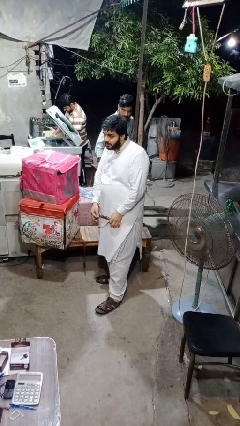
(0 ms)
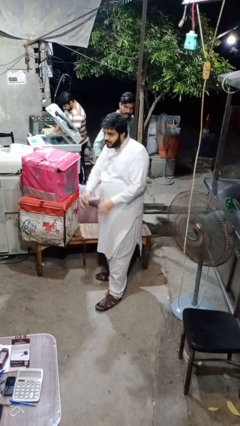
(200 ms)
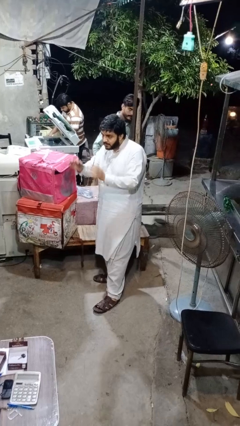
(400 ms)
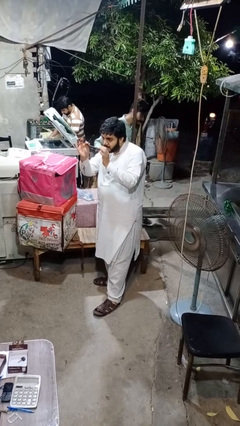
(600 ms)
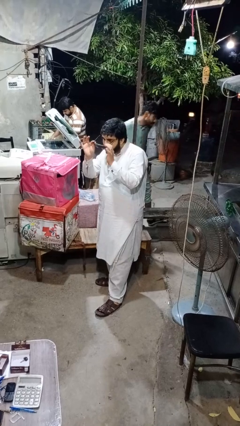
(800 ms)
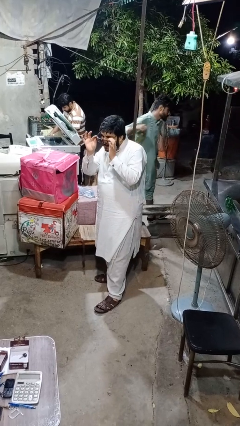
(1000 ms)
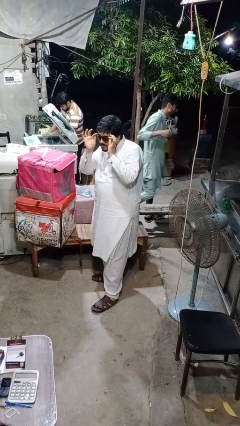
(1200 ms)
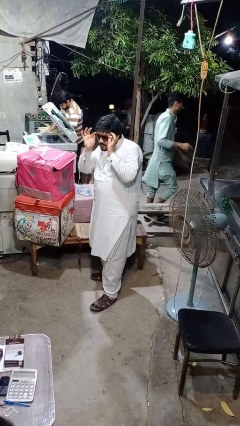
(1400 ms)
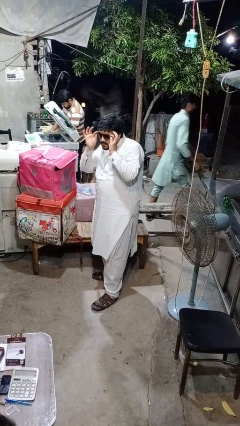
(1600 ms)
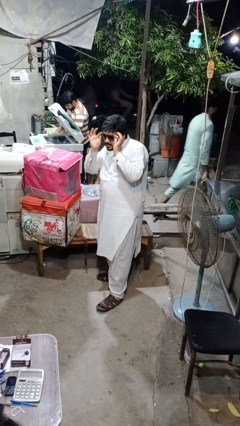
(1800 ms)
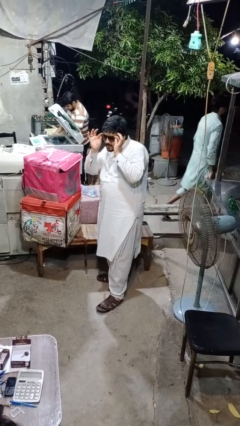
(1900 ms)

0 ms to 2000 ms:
person puts on glasses

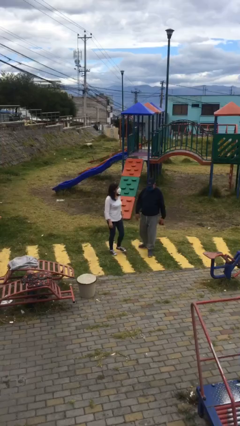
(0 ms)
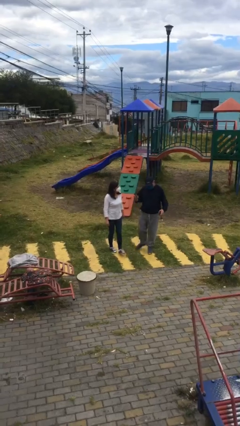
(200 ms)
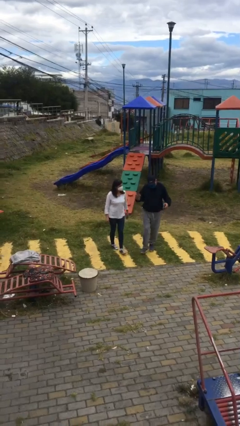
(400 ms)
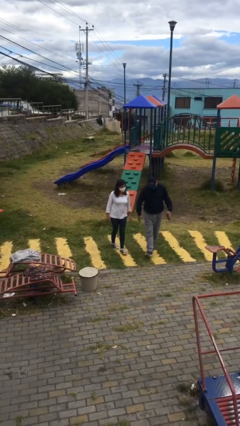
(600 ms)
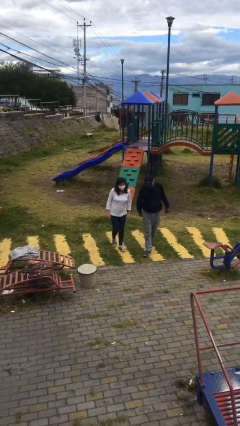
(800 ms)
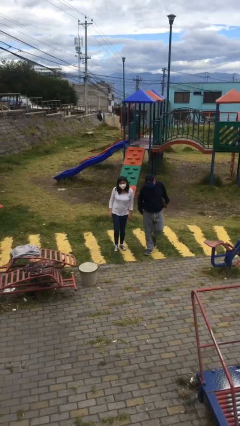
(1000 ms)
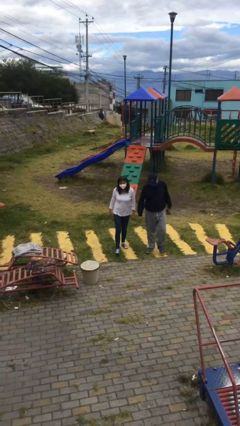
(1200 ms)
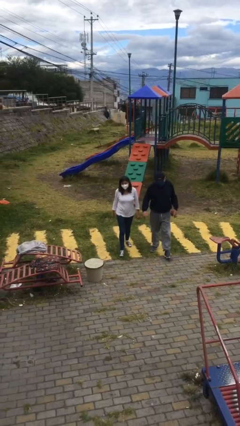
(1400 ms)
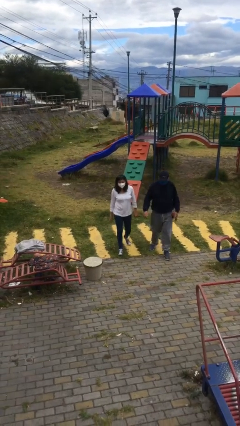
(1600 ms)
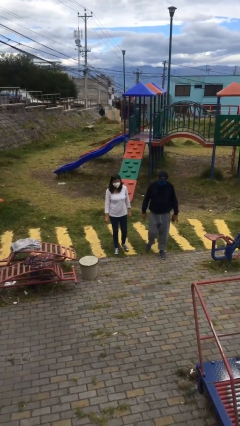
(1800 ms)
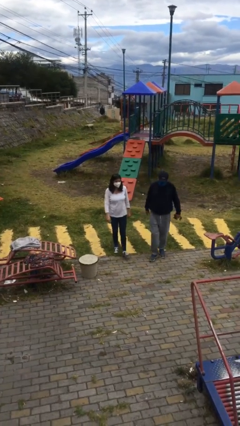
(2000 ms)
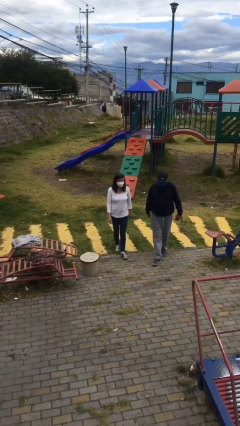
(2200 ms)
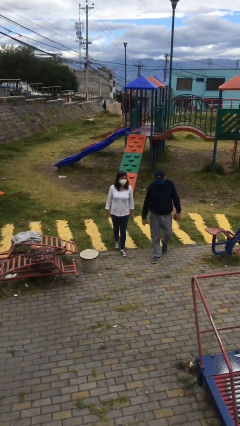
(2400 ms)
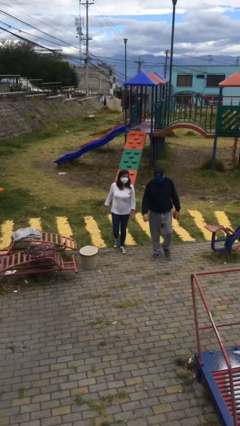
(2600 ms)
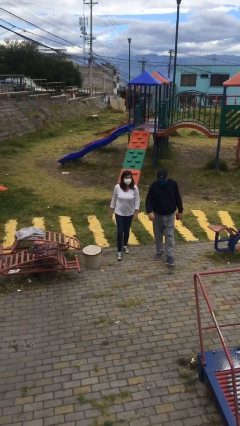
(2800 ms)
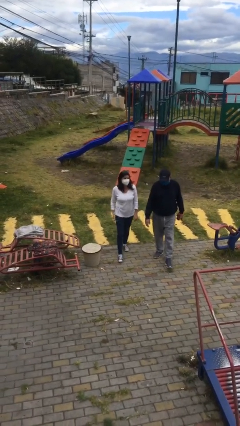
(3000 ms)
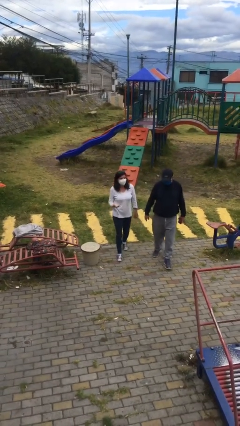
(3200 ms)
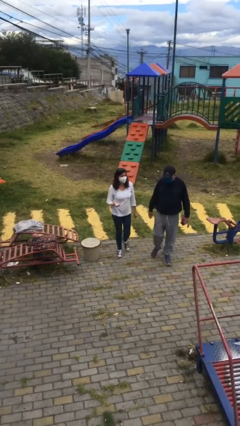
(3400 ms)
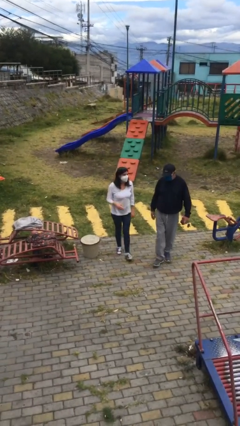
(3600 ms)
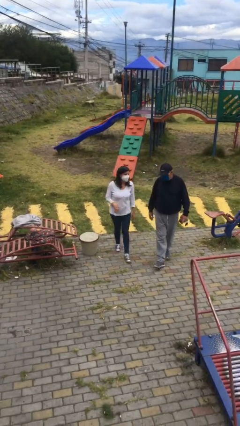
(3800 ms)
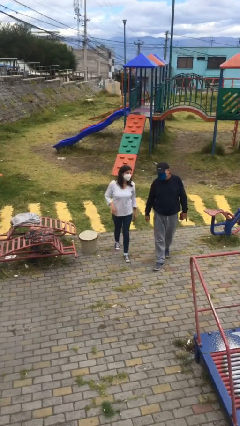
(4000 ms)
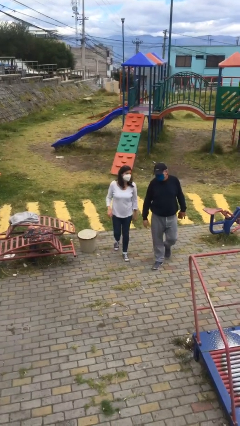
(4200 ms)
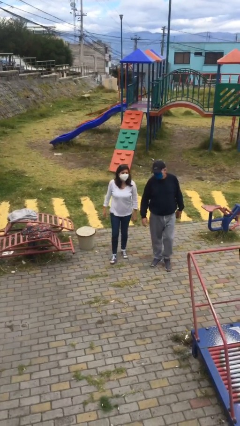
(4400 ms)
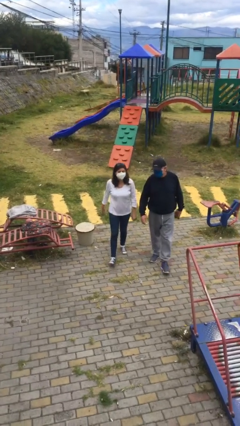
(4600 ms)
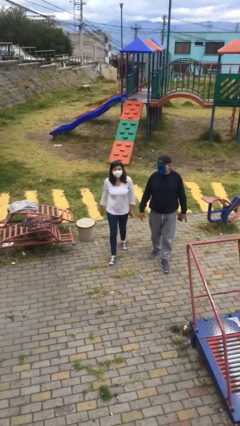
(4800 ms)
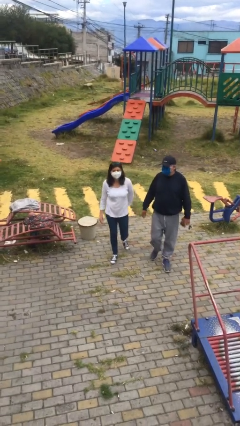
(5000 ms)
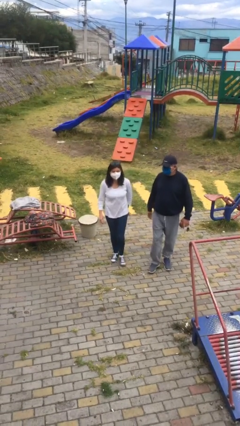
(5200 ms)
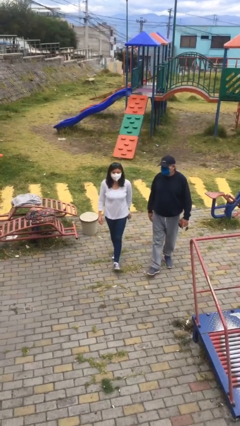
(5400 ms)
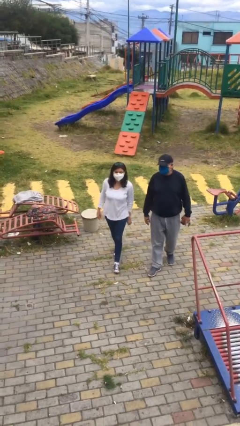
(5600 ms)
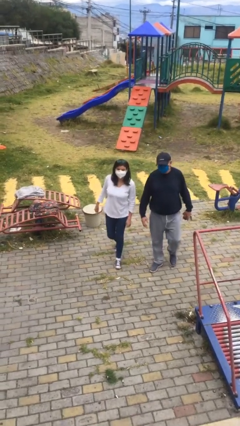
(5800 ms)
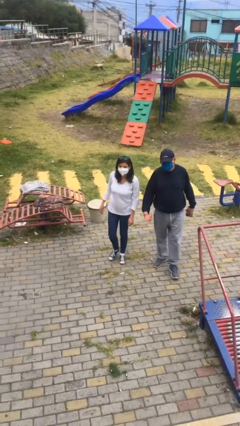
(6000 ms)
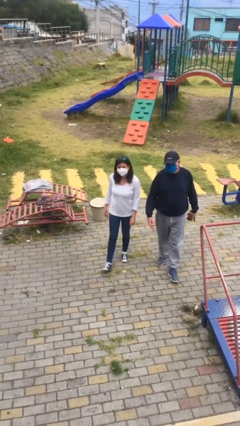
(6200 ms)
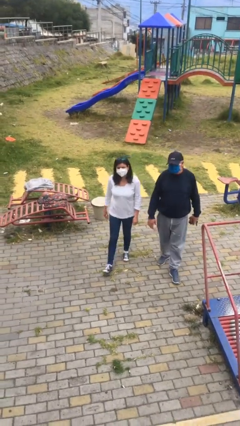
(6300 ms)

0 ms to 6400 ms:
person talks to person

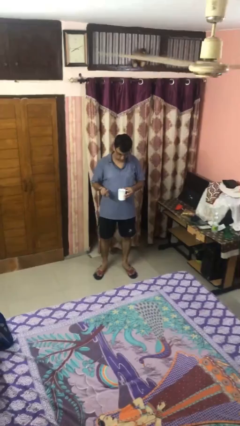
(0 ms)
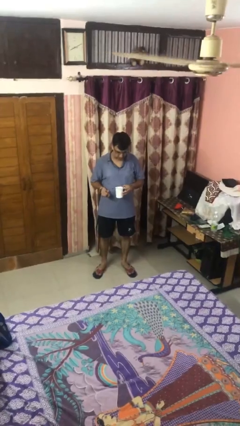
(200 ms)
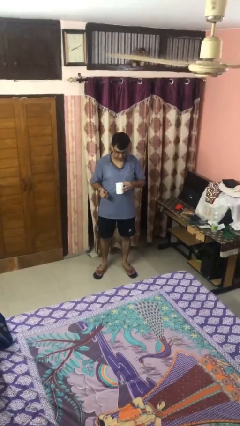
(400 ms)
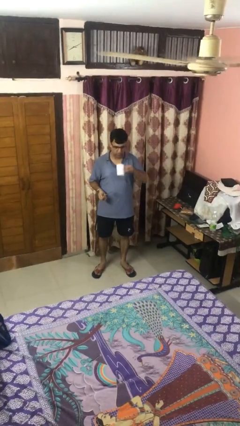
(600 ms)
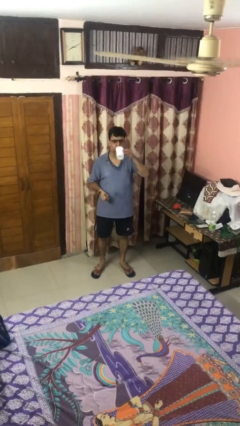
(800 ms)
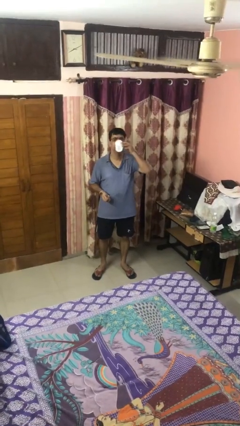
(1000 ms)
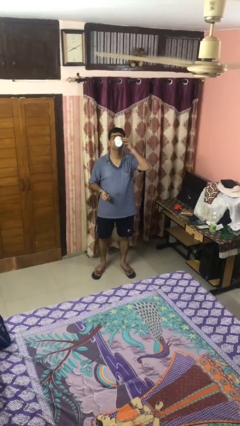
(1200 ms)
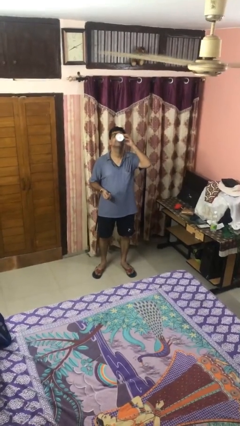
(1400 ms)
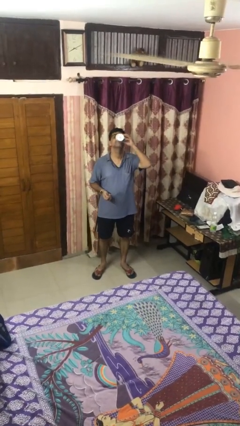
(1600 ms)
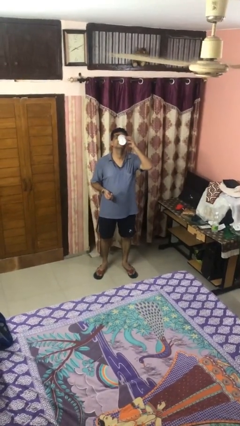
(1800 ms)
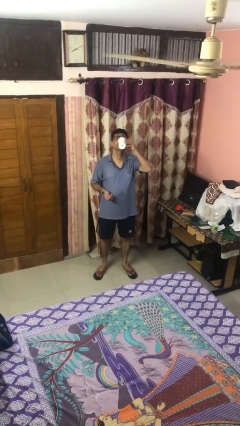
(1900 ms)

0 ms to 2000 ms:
person drinks from mug

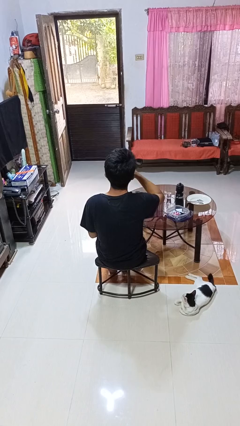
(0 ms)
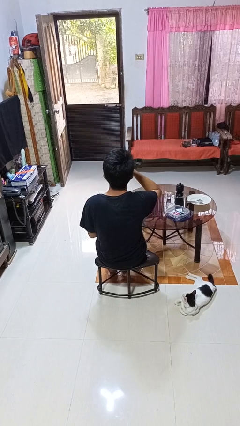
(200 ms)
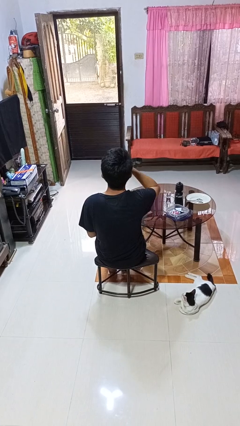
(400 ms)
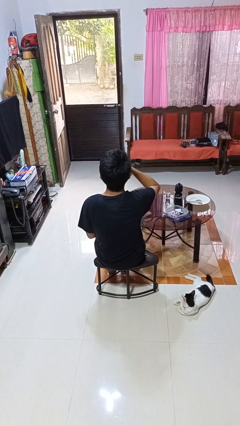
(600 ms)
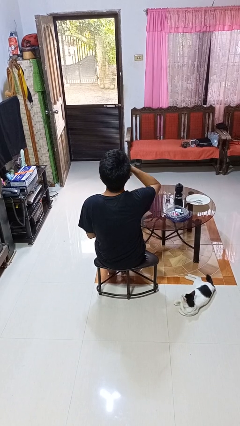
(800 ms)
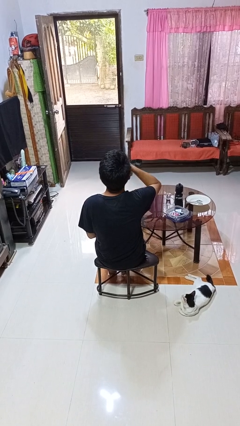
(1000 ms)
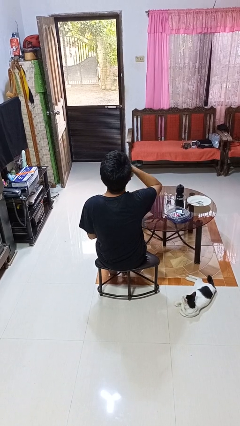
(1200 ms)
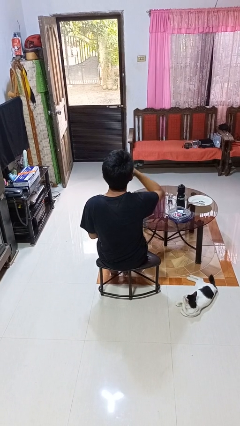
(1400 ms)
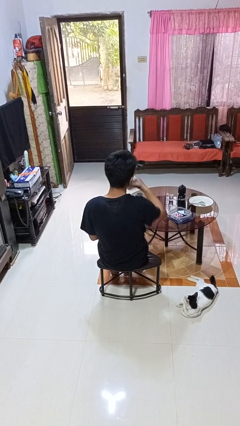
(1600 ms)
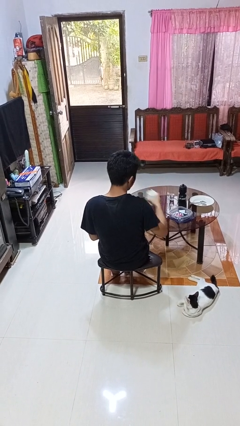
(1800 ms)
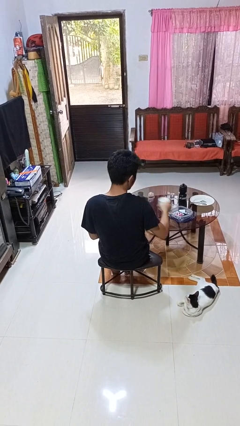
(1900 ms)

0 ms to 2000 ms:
person drinks from cup

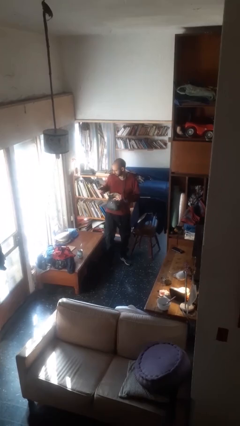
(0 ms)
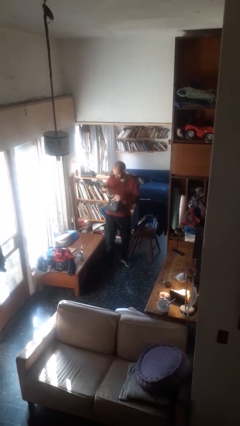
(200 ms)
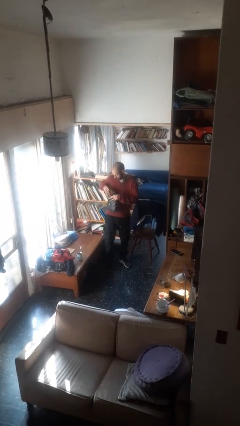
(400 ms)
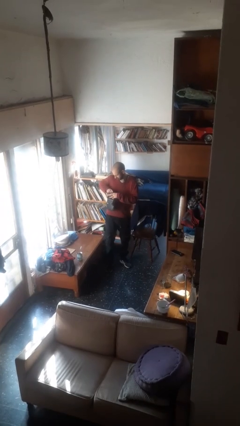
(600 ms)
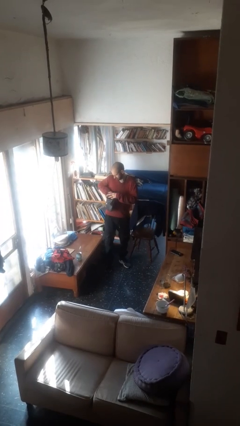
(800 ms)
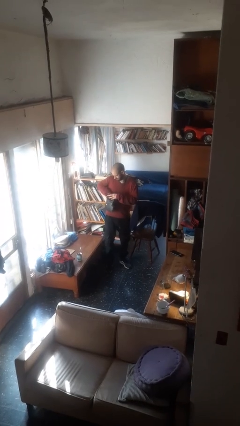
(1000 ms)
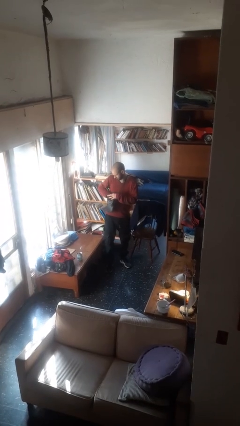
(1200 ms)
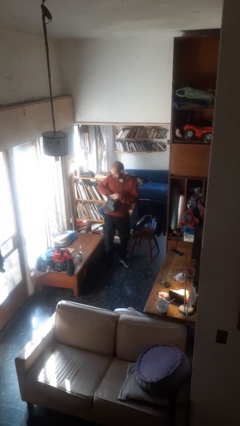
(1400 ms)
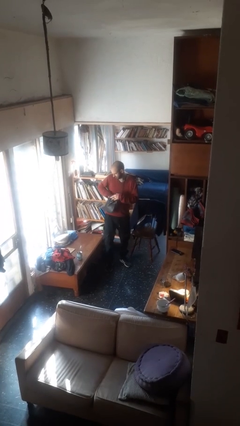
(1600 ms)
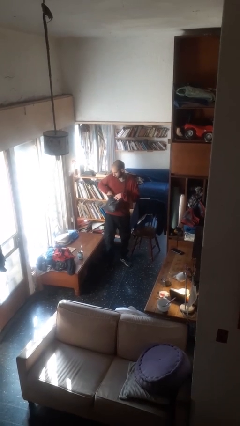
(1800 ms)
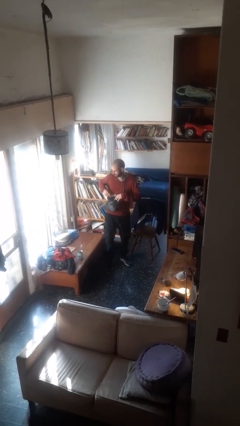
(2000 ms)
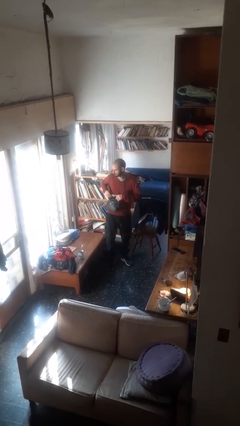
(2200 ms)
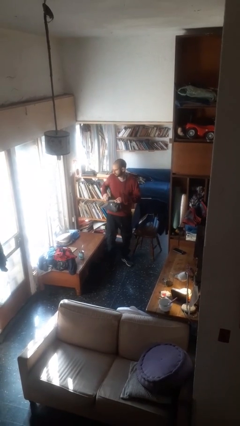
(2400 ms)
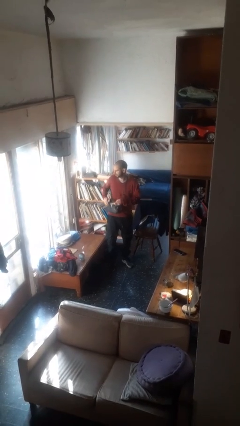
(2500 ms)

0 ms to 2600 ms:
person puts object into purse

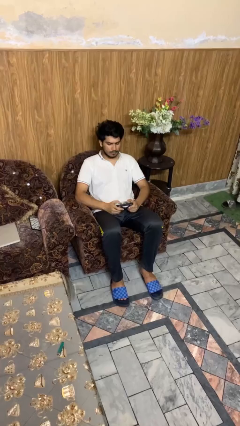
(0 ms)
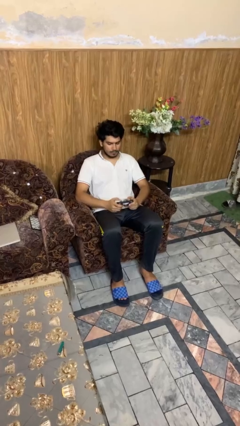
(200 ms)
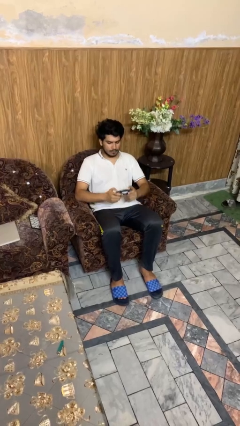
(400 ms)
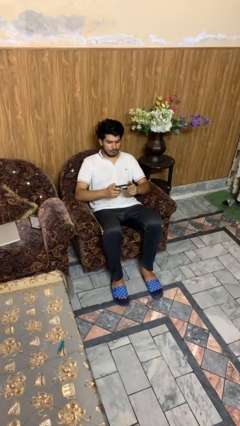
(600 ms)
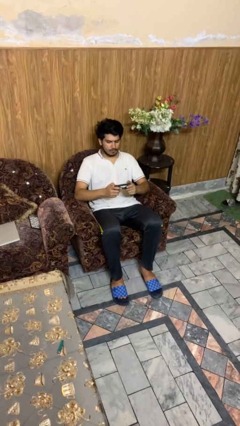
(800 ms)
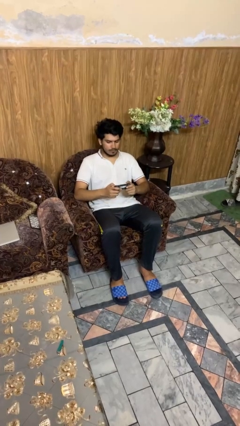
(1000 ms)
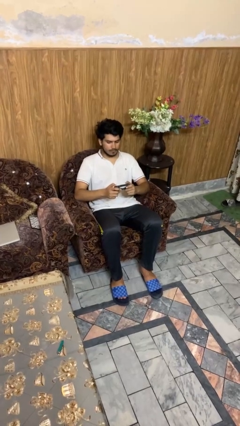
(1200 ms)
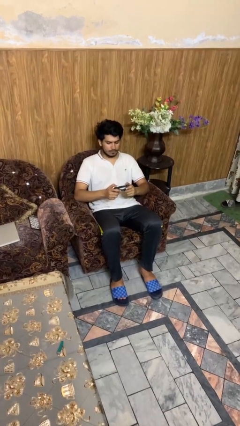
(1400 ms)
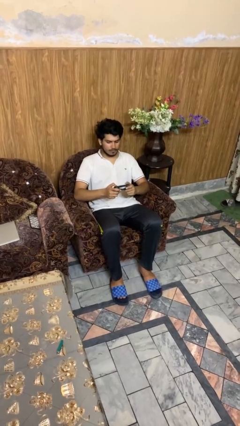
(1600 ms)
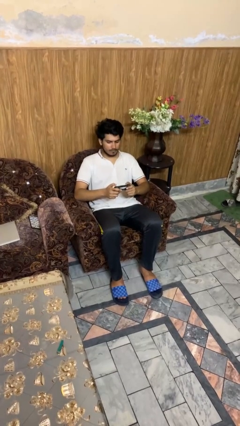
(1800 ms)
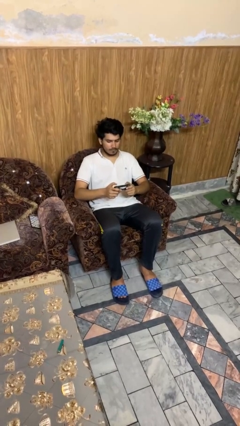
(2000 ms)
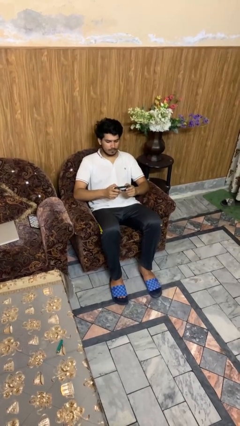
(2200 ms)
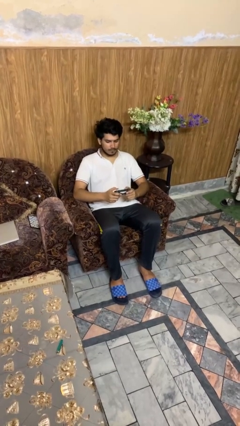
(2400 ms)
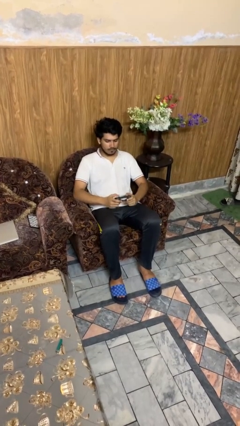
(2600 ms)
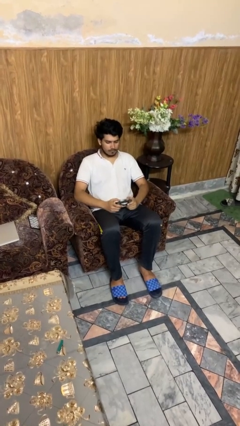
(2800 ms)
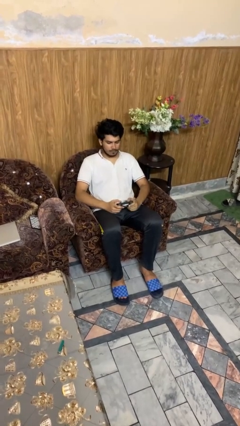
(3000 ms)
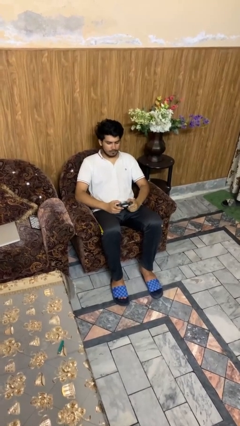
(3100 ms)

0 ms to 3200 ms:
person interacts with handheld game
